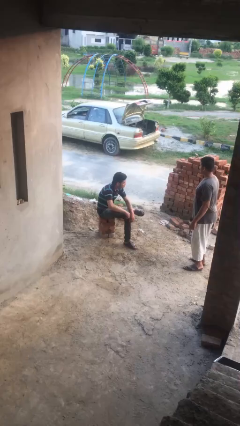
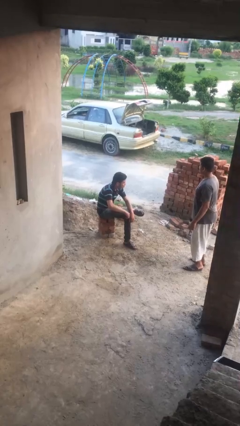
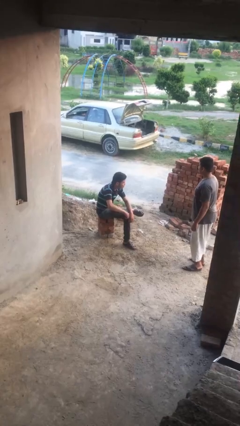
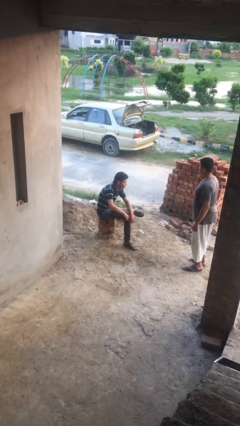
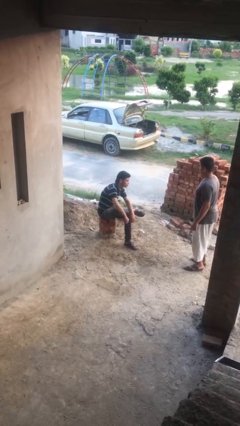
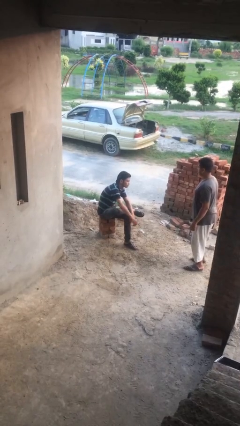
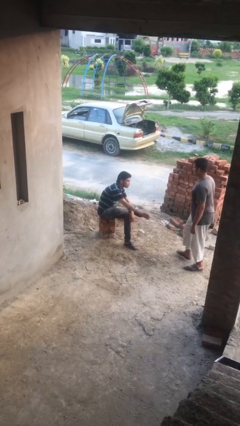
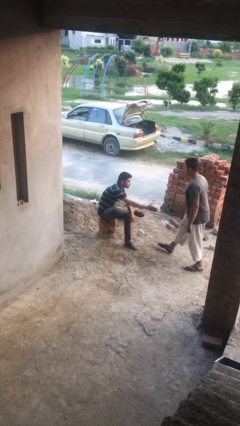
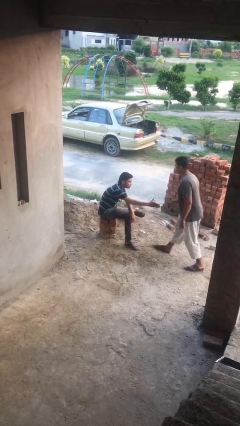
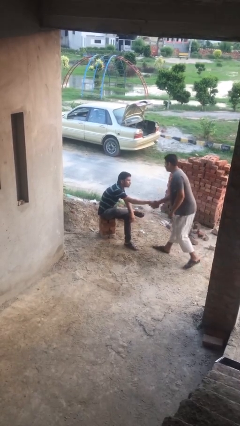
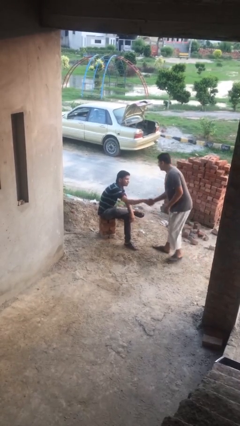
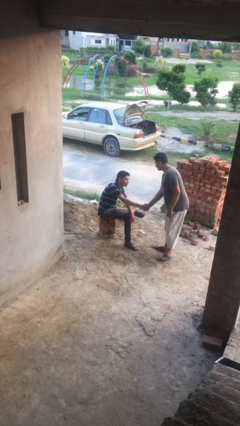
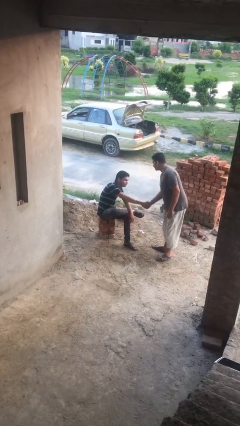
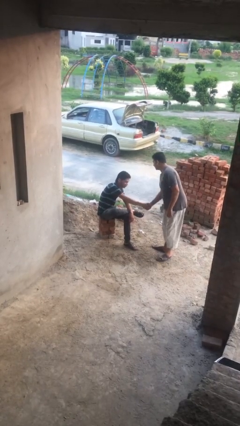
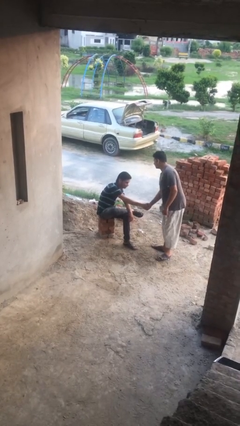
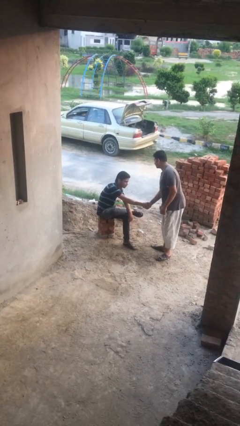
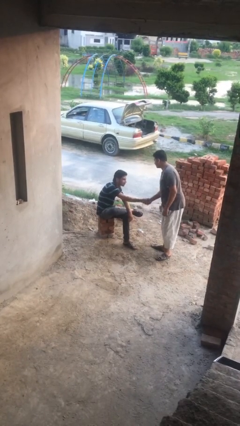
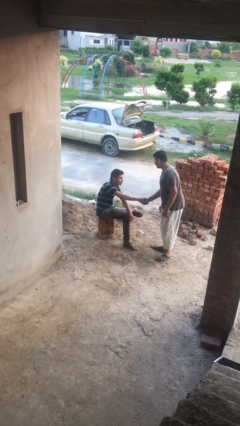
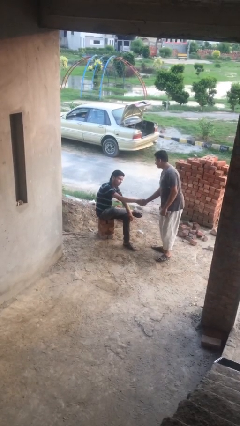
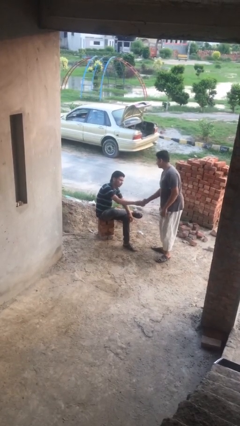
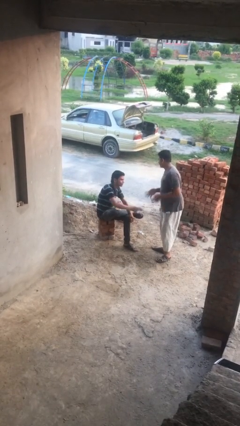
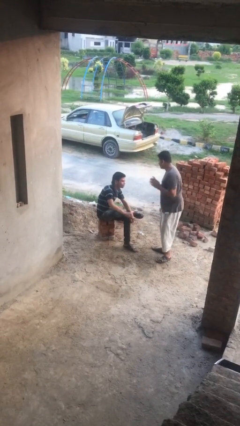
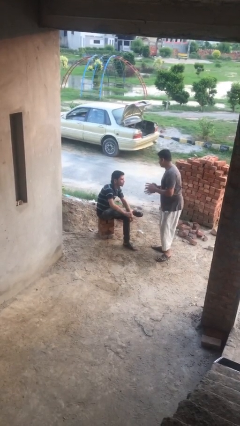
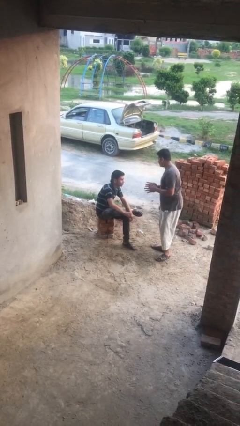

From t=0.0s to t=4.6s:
person shakes hand

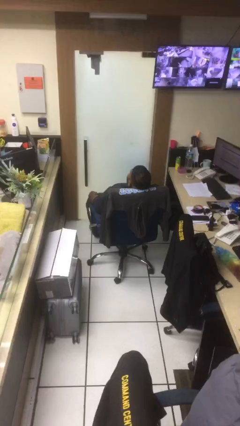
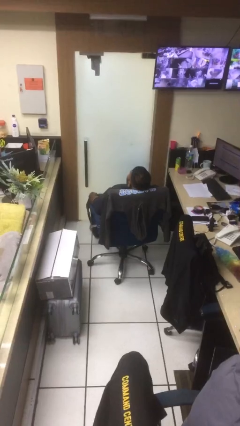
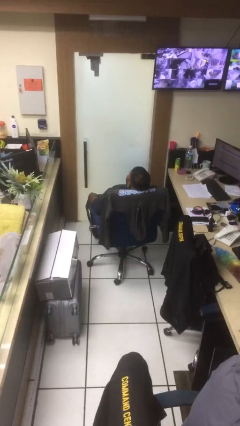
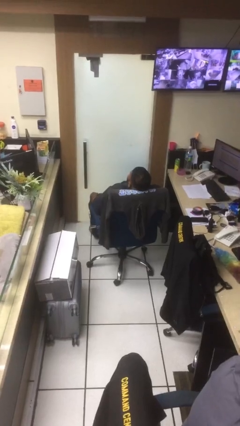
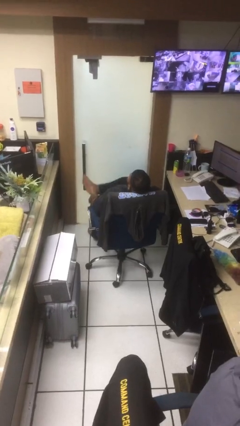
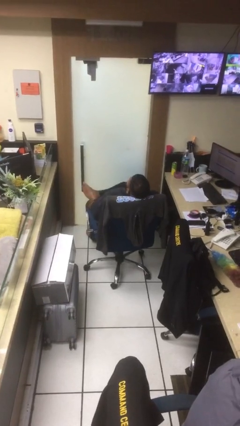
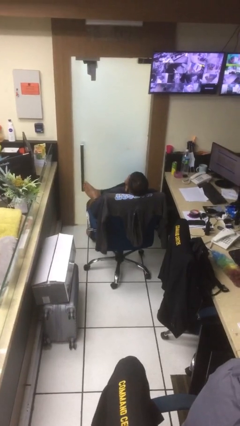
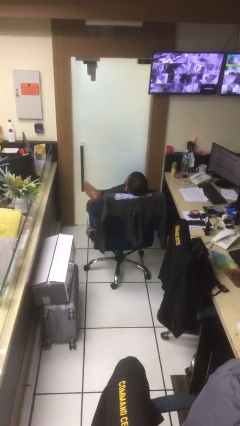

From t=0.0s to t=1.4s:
person crosses legs

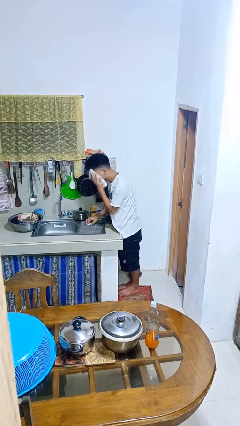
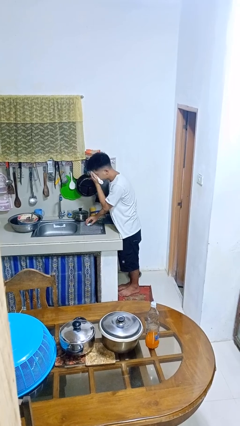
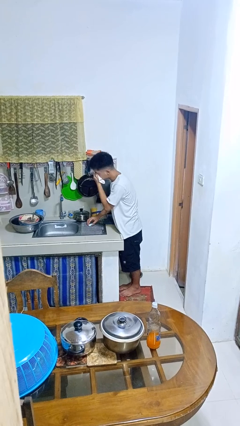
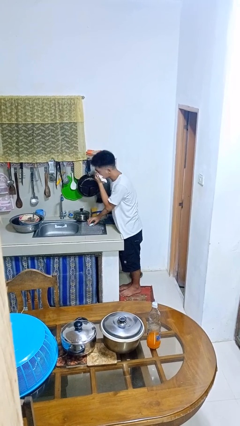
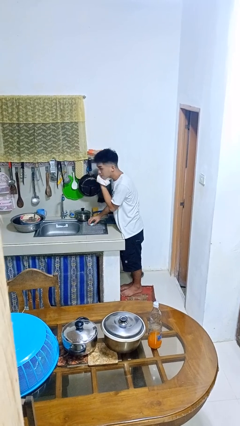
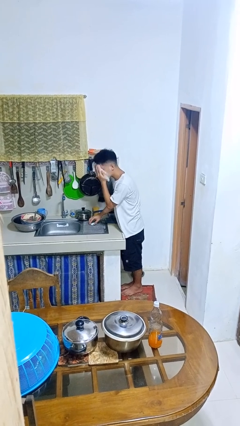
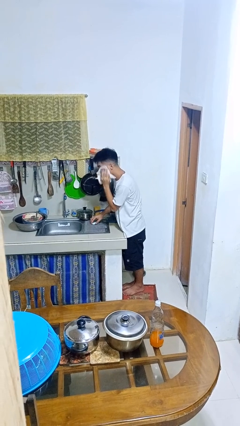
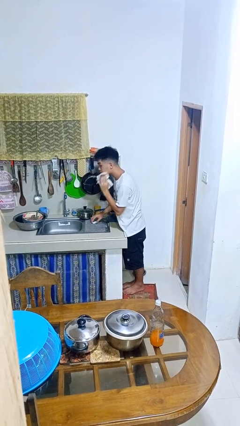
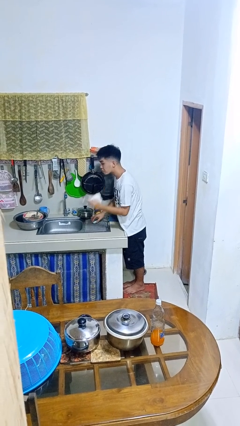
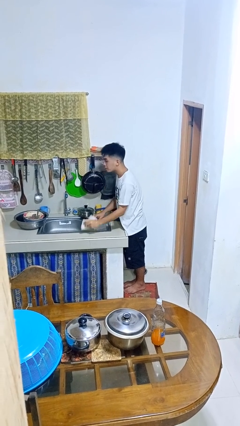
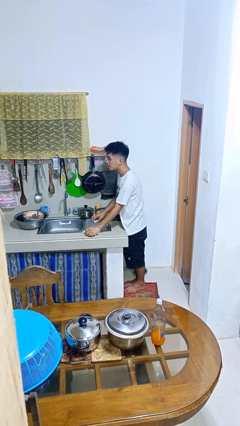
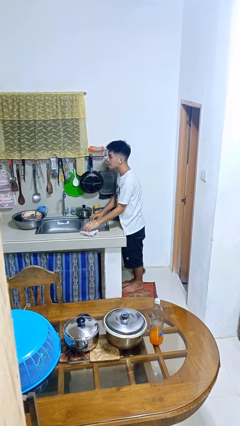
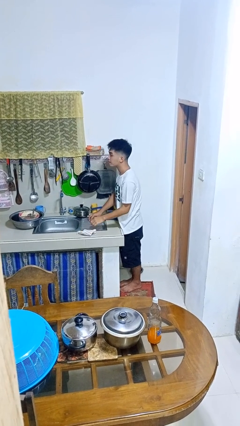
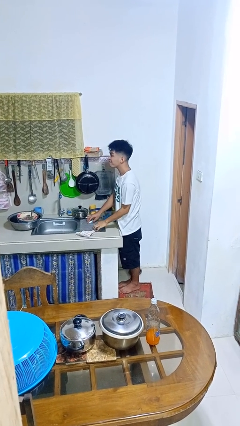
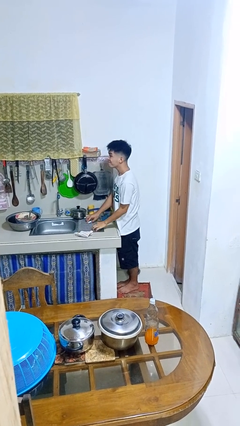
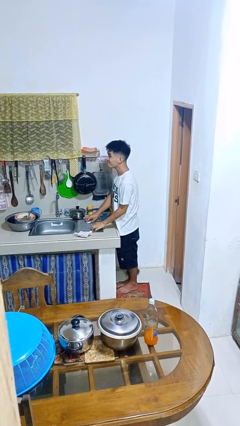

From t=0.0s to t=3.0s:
person dries face with towel

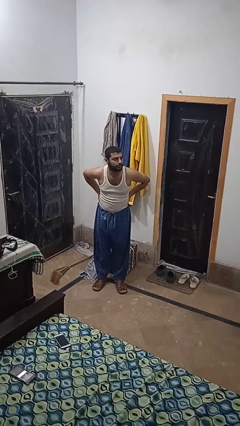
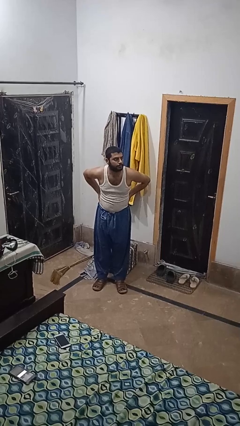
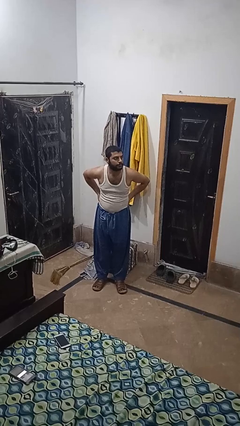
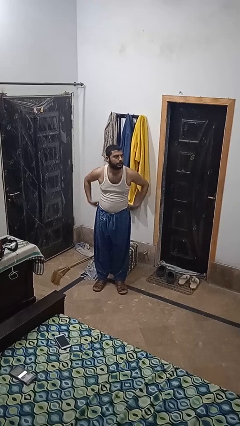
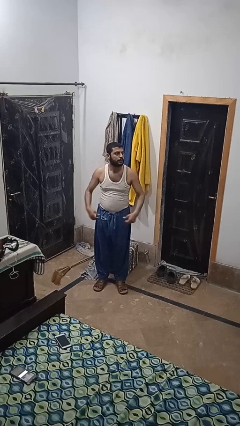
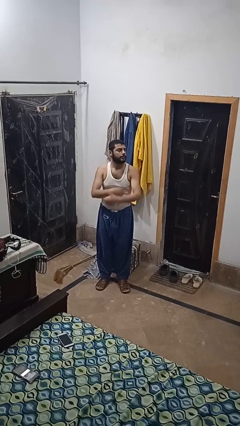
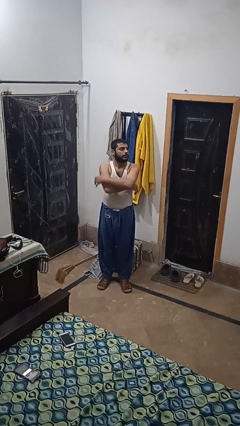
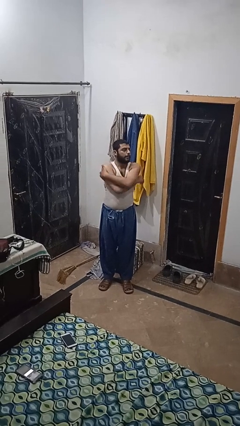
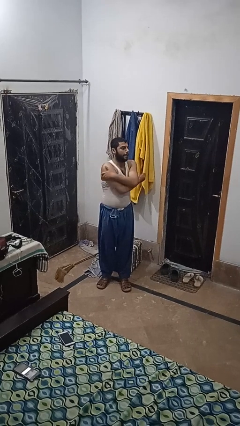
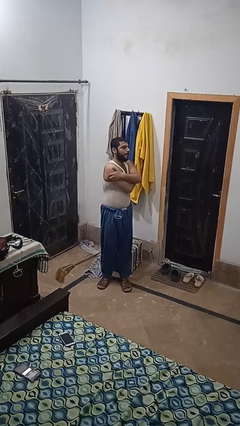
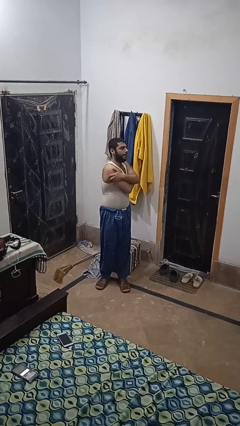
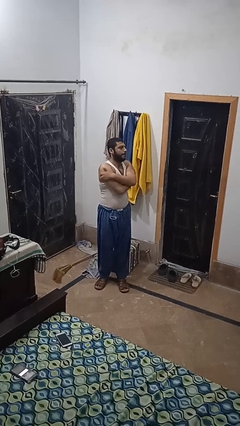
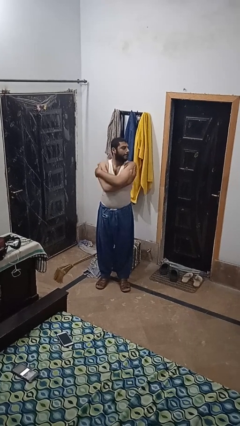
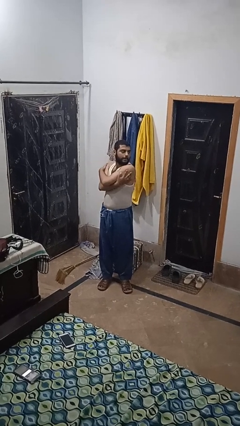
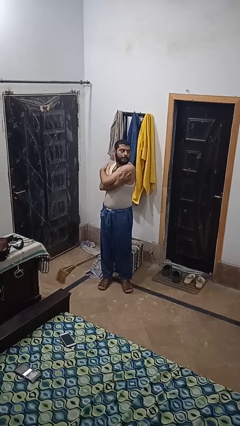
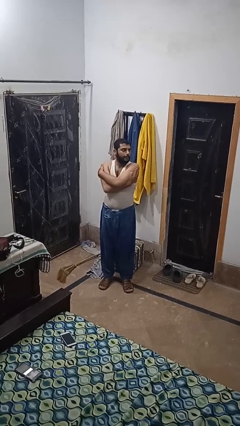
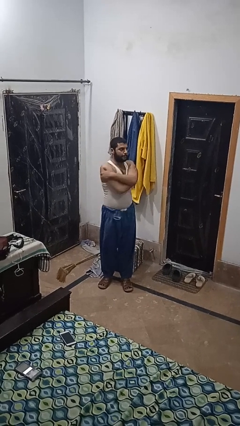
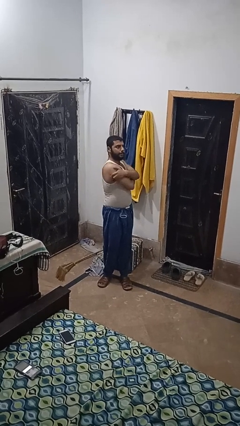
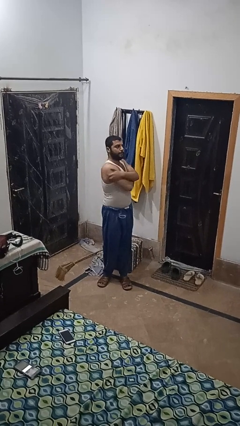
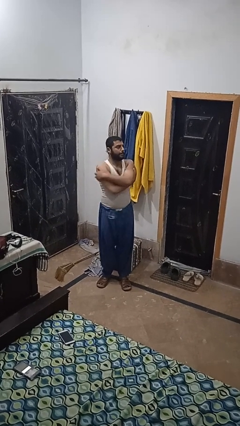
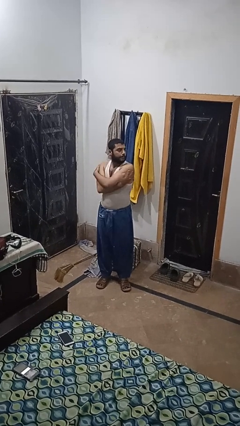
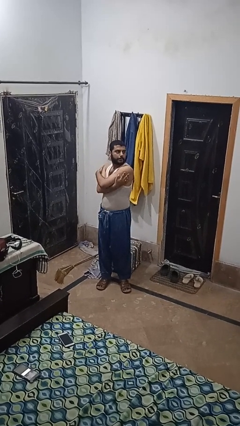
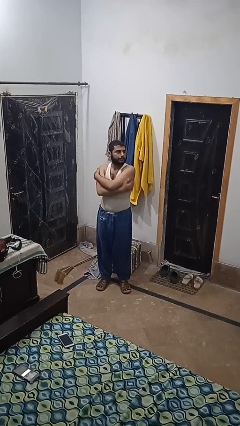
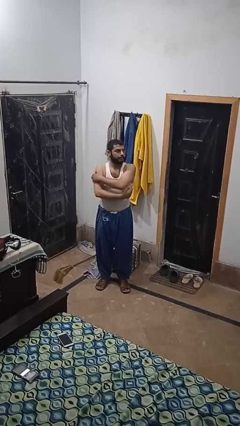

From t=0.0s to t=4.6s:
person stretches arms to side

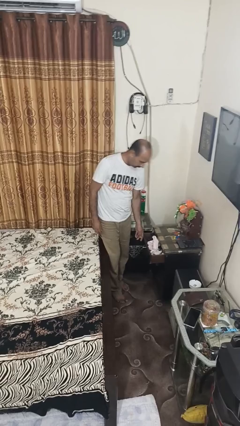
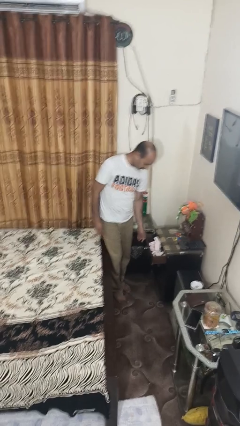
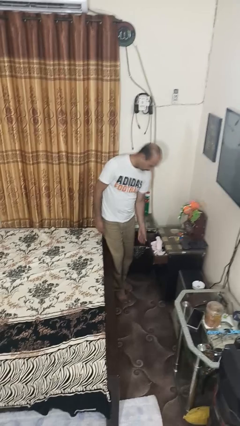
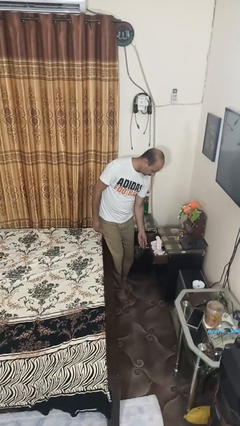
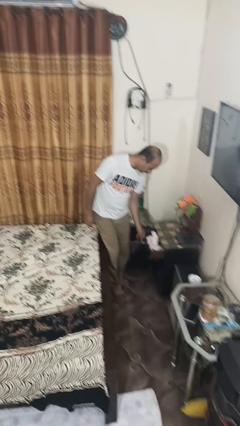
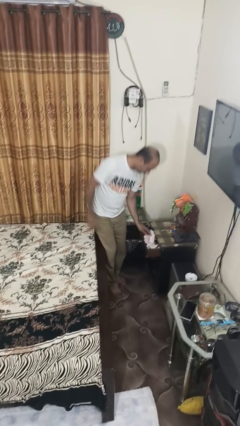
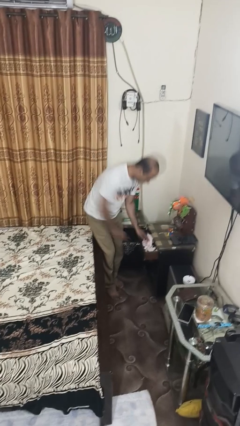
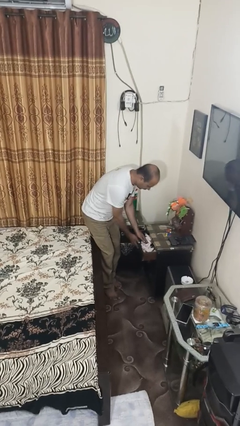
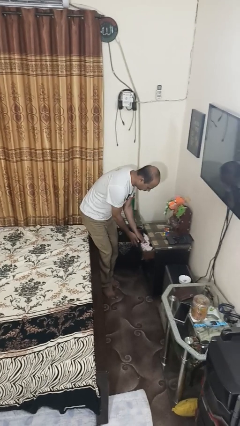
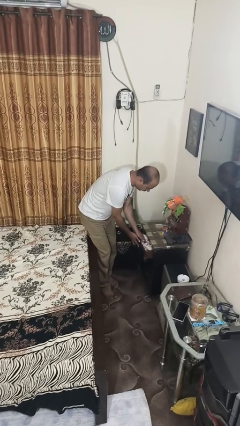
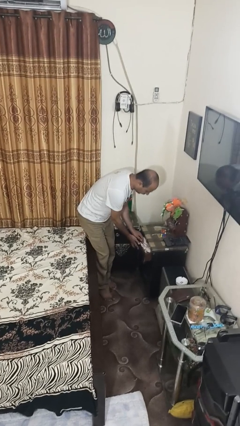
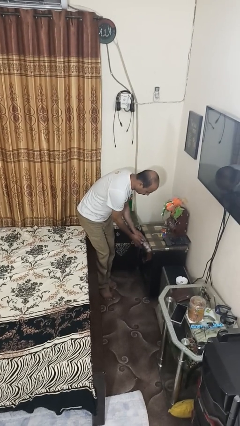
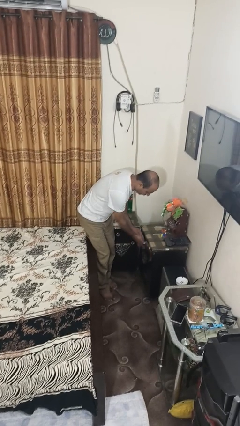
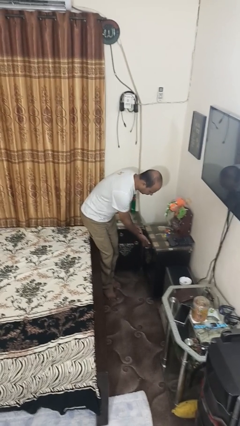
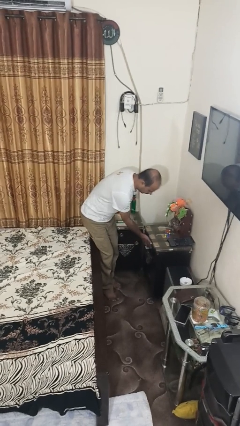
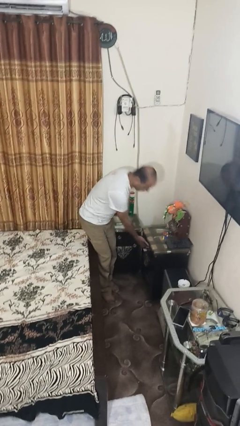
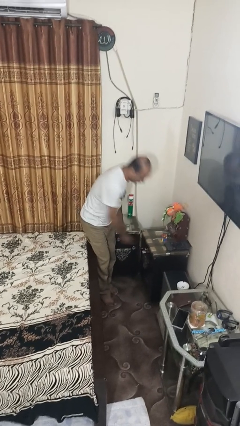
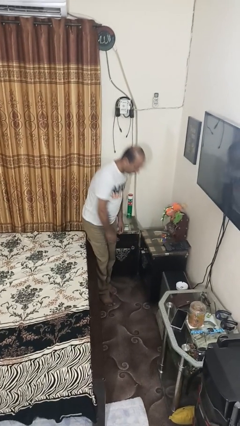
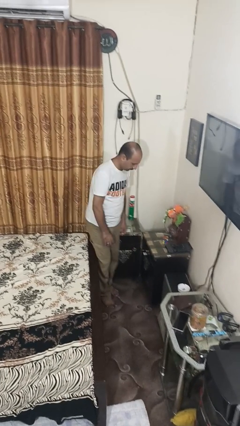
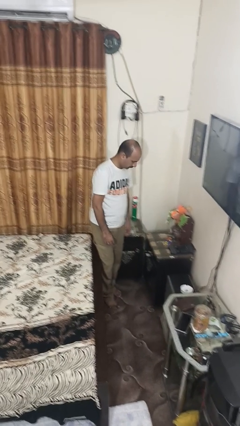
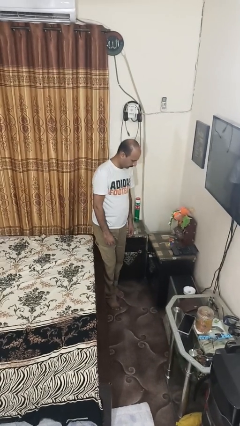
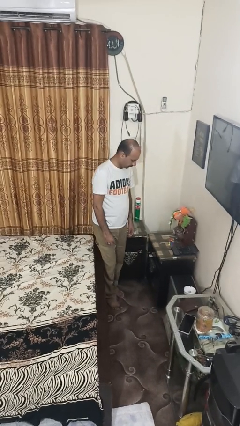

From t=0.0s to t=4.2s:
person closes dresser drawer
